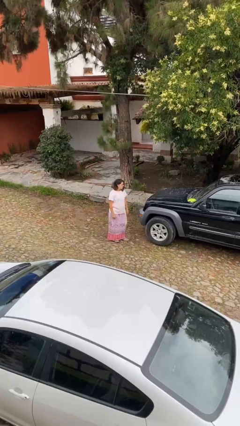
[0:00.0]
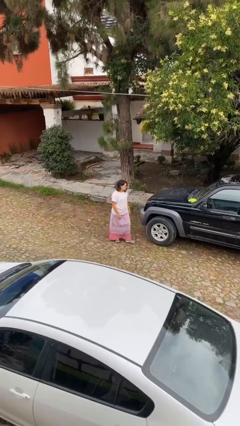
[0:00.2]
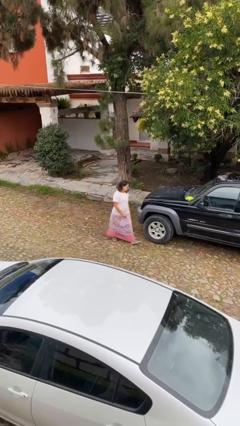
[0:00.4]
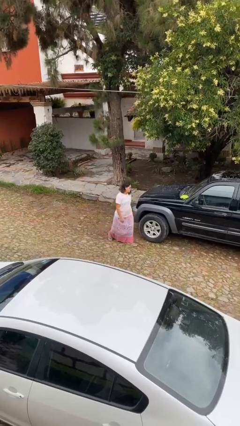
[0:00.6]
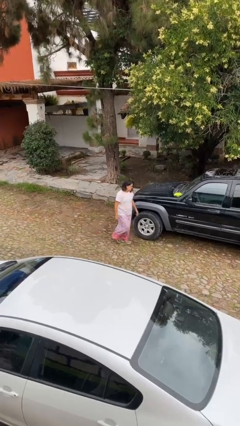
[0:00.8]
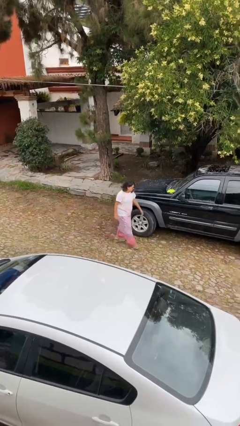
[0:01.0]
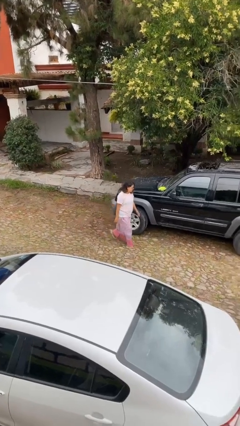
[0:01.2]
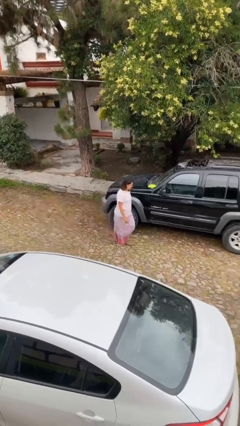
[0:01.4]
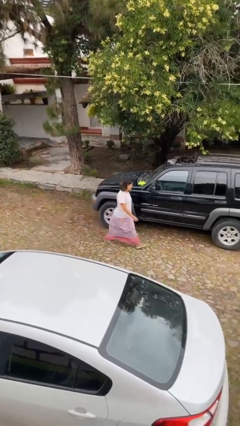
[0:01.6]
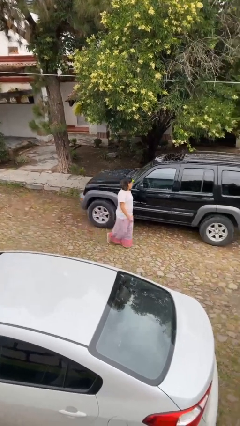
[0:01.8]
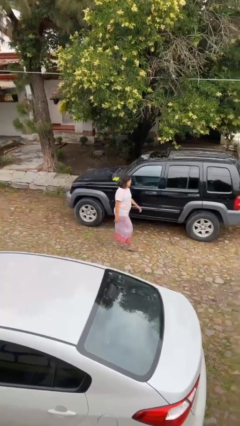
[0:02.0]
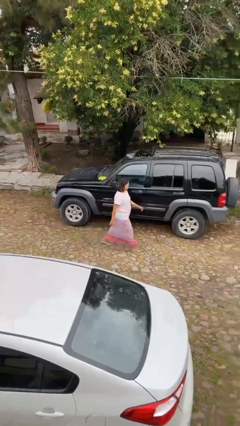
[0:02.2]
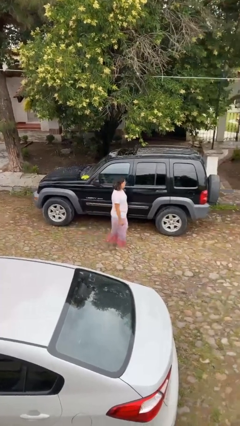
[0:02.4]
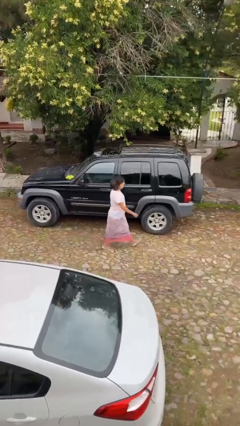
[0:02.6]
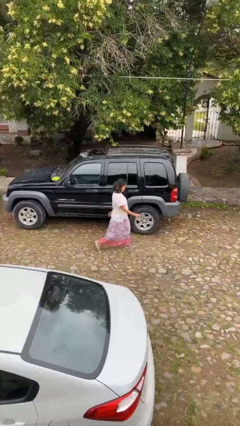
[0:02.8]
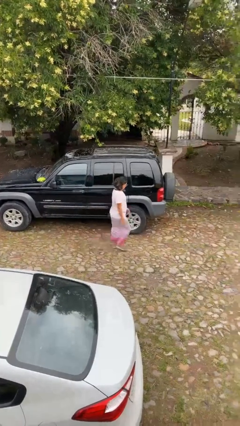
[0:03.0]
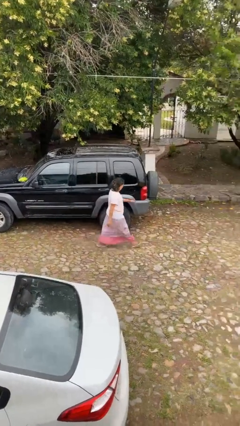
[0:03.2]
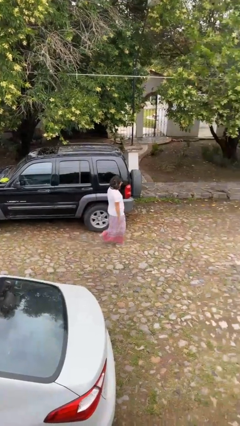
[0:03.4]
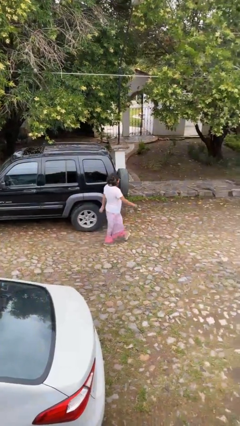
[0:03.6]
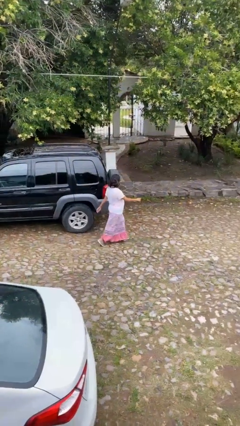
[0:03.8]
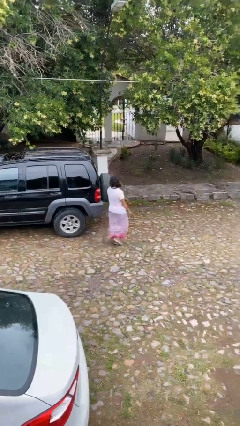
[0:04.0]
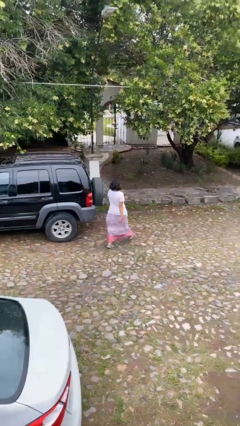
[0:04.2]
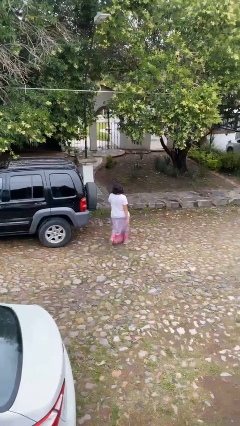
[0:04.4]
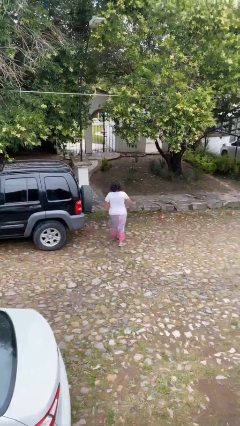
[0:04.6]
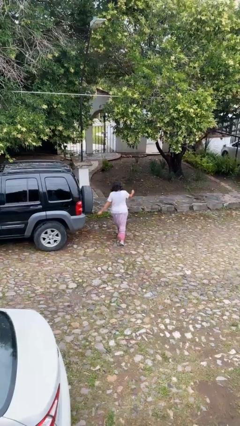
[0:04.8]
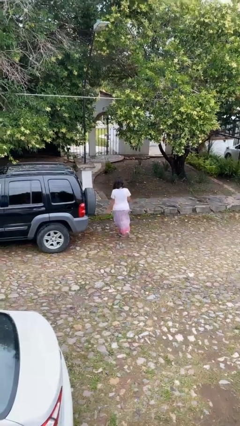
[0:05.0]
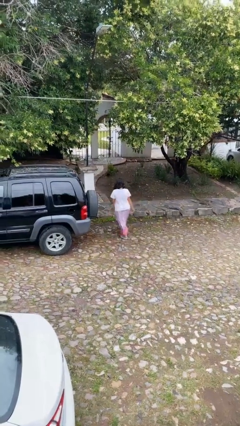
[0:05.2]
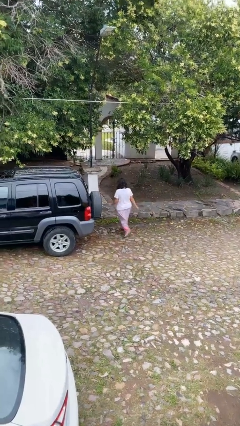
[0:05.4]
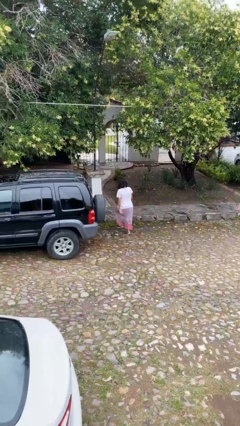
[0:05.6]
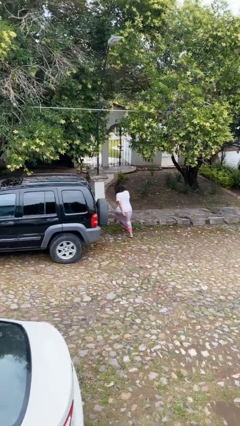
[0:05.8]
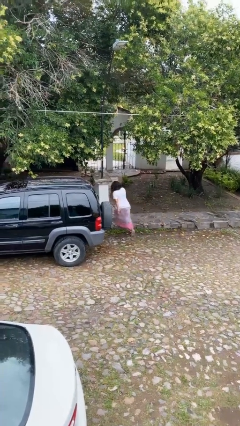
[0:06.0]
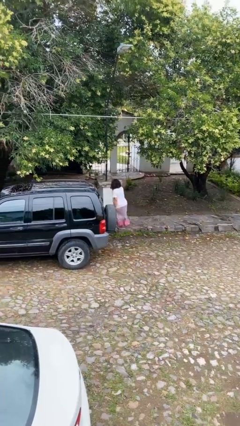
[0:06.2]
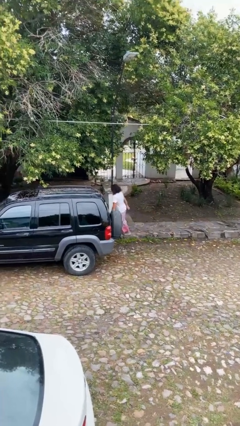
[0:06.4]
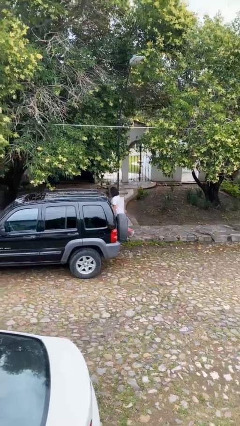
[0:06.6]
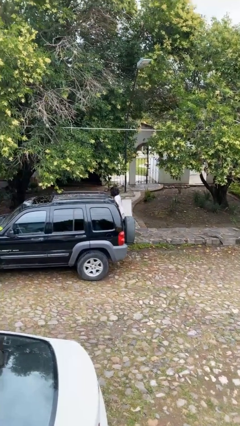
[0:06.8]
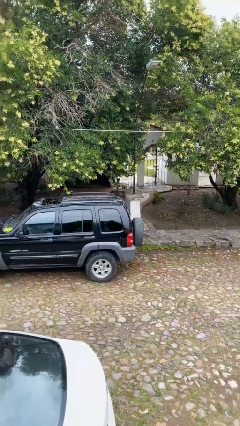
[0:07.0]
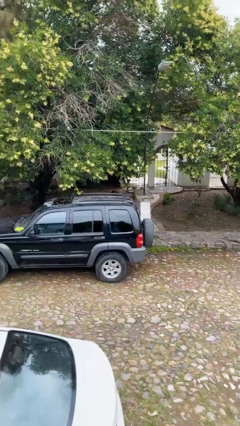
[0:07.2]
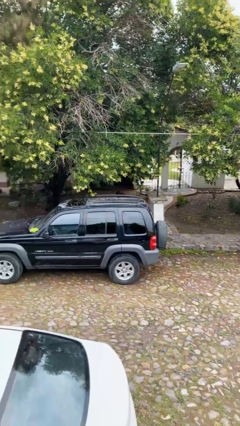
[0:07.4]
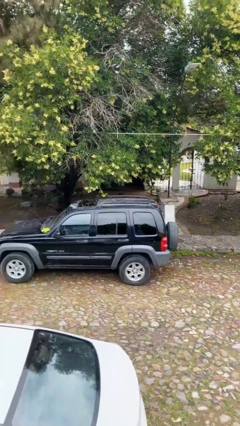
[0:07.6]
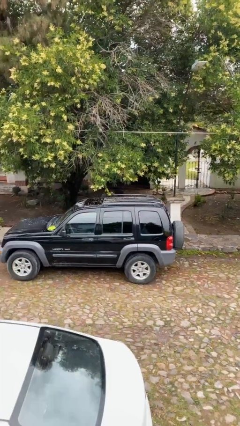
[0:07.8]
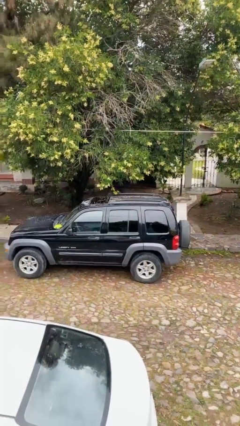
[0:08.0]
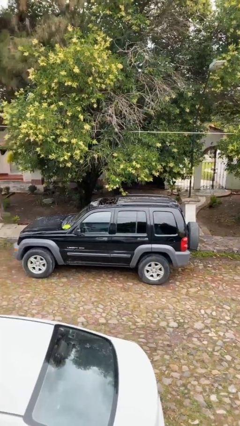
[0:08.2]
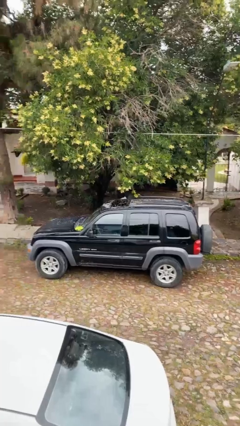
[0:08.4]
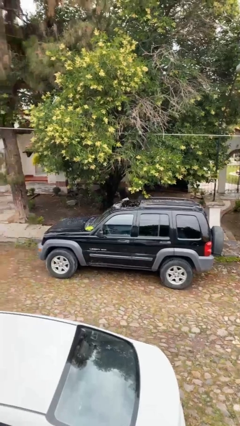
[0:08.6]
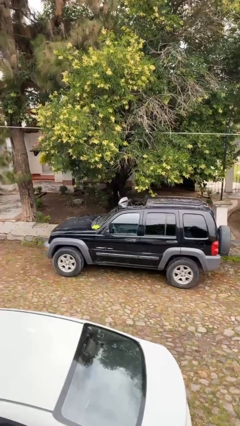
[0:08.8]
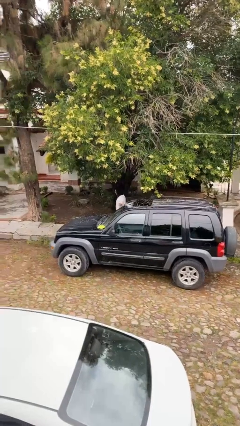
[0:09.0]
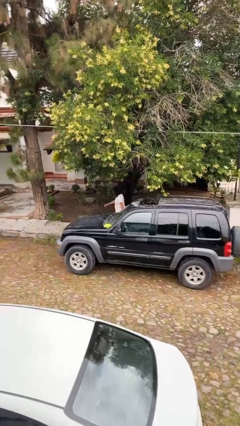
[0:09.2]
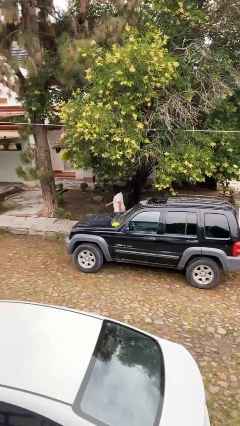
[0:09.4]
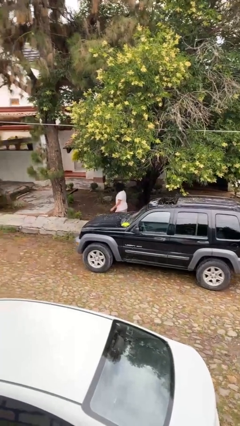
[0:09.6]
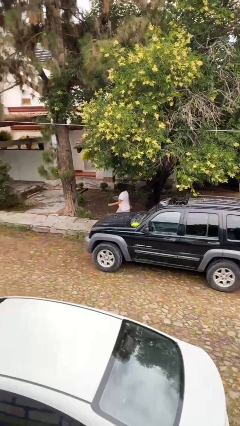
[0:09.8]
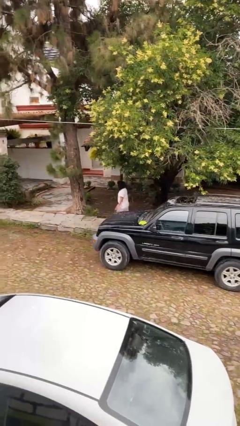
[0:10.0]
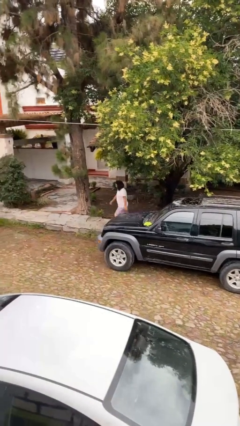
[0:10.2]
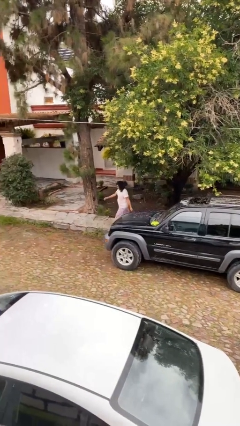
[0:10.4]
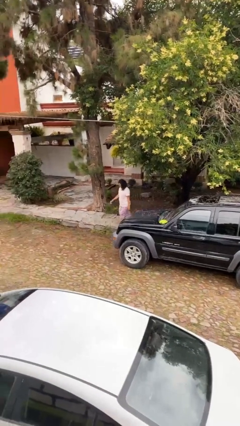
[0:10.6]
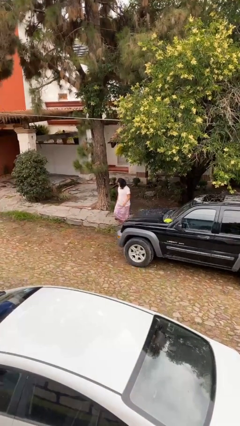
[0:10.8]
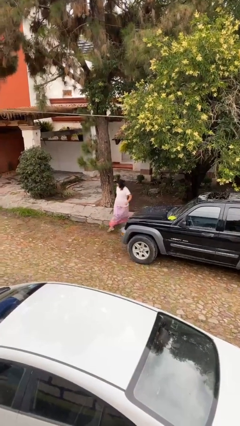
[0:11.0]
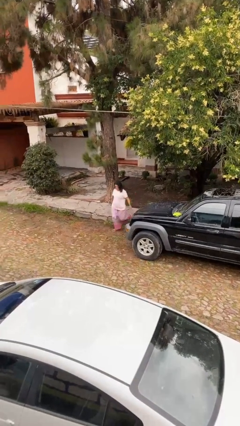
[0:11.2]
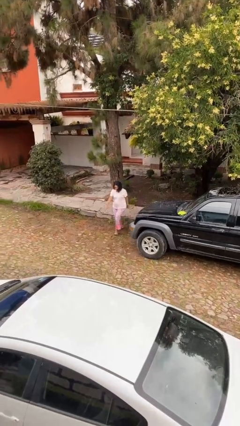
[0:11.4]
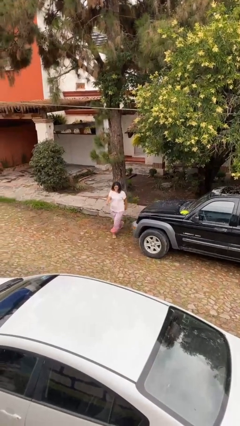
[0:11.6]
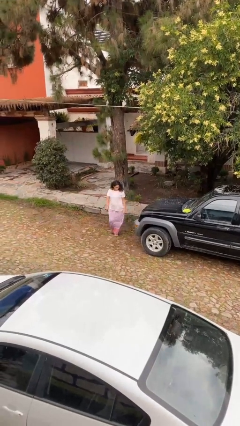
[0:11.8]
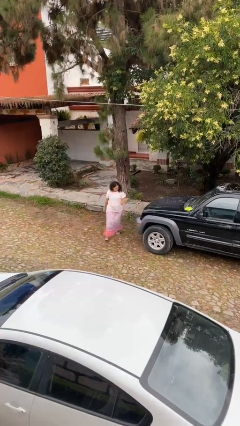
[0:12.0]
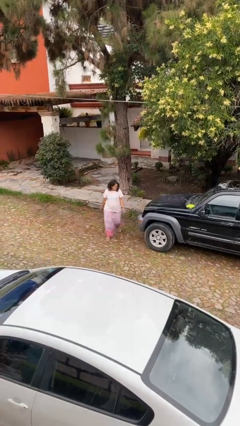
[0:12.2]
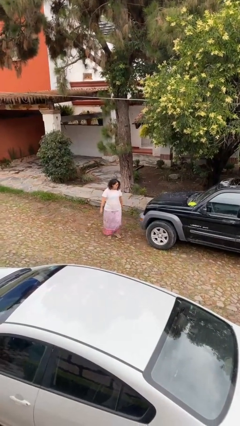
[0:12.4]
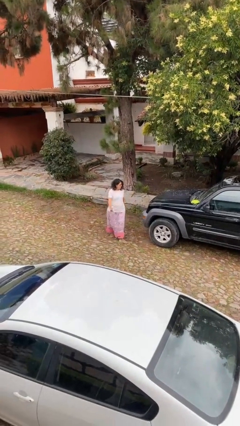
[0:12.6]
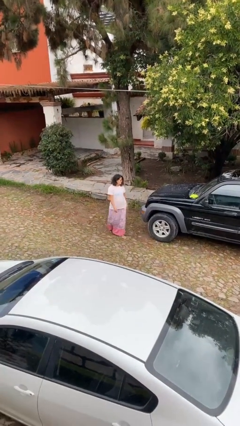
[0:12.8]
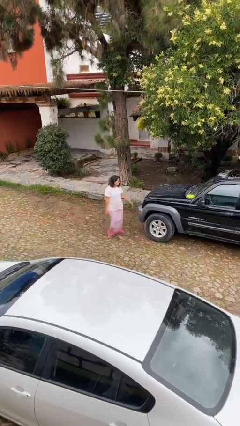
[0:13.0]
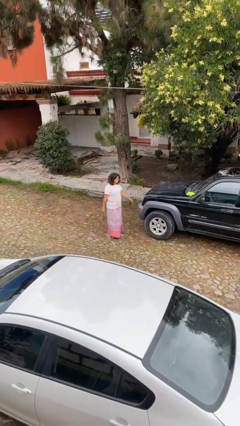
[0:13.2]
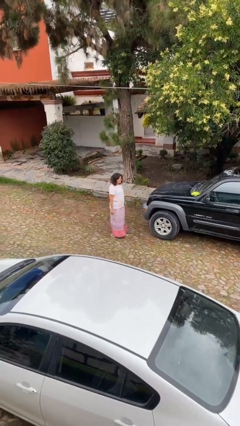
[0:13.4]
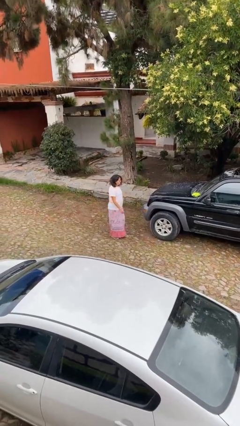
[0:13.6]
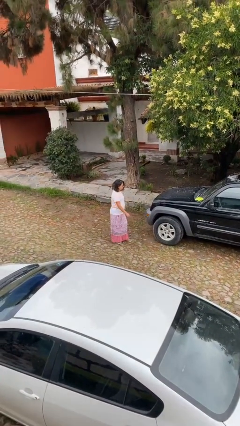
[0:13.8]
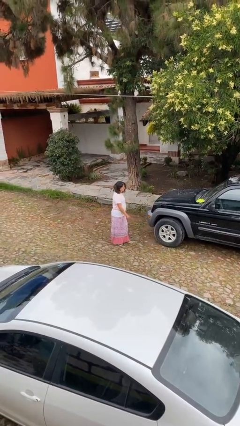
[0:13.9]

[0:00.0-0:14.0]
person walks around car

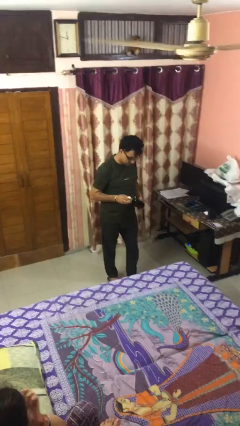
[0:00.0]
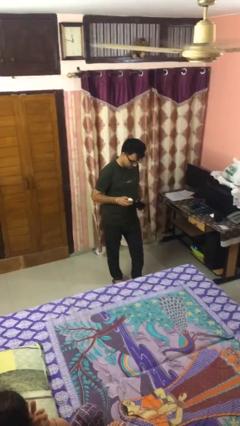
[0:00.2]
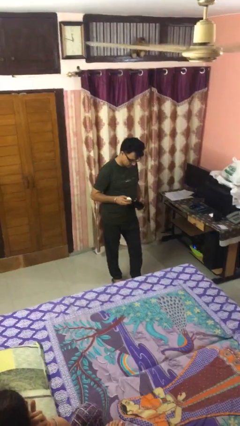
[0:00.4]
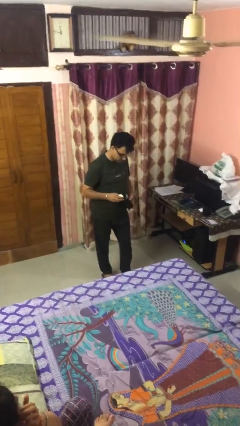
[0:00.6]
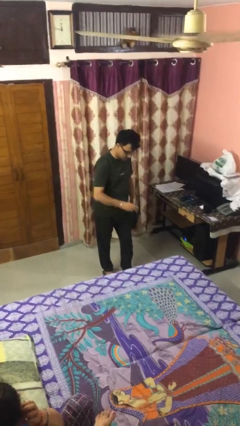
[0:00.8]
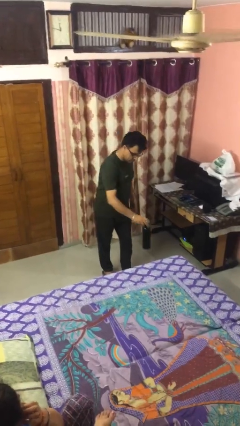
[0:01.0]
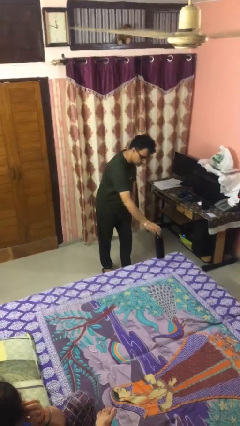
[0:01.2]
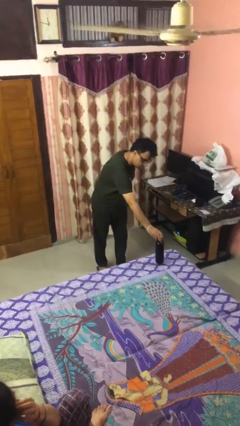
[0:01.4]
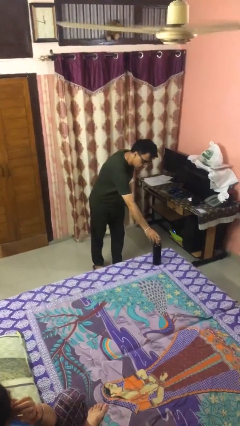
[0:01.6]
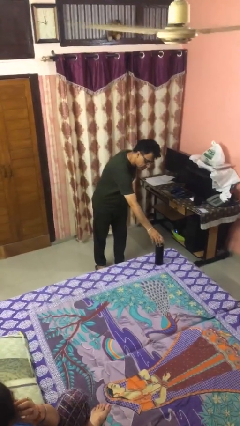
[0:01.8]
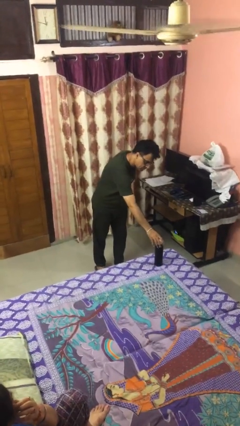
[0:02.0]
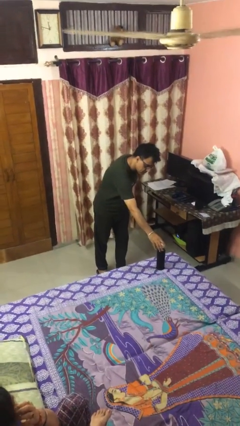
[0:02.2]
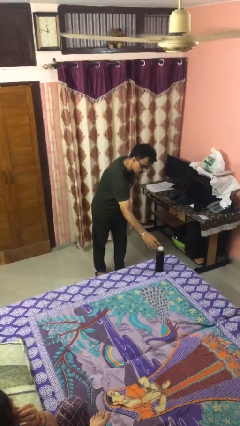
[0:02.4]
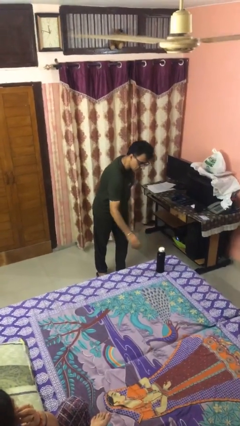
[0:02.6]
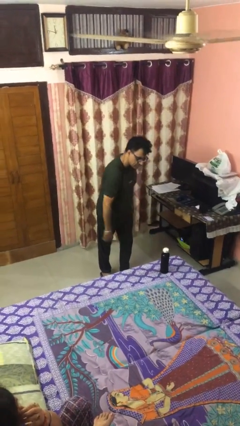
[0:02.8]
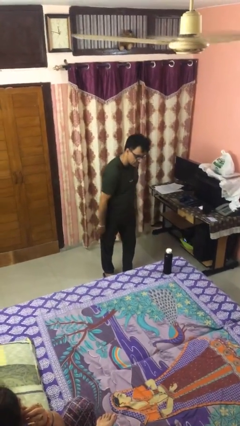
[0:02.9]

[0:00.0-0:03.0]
person puts down object on bed

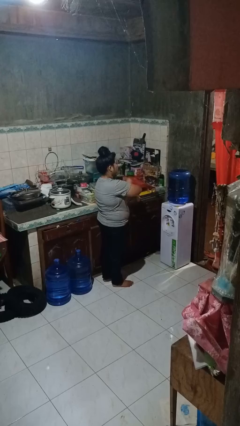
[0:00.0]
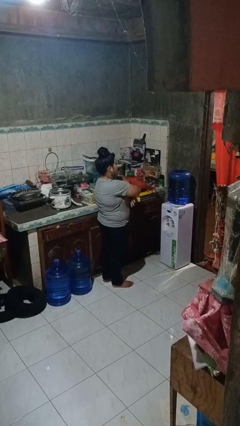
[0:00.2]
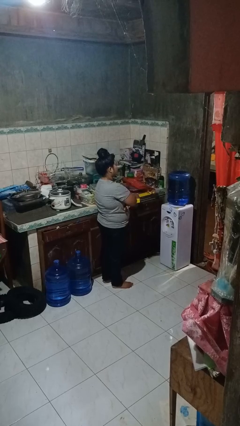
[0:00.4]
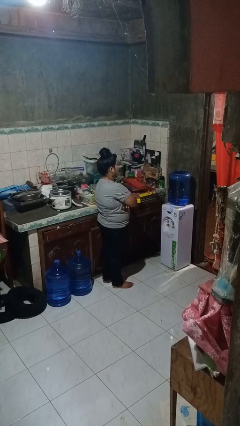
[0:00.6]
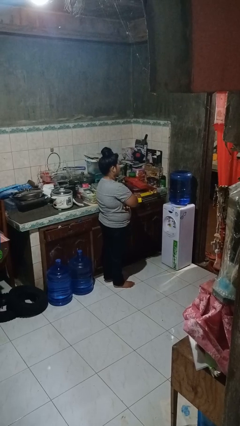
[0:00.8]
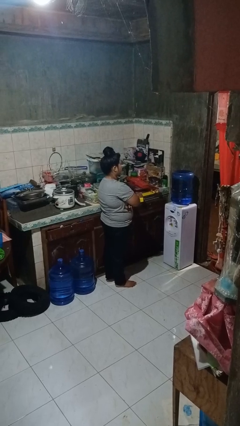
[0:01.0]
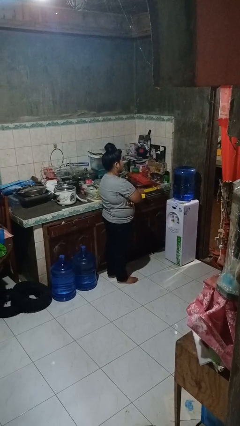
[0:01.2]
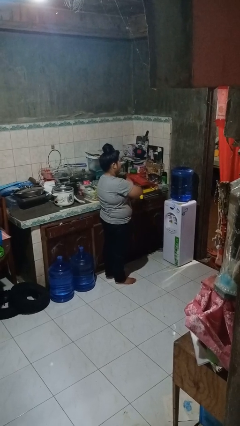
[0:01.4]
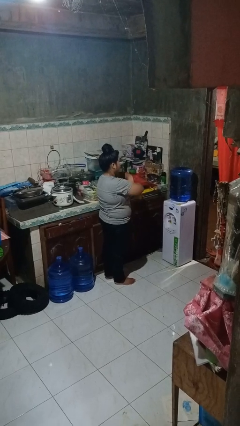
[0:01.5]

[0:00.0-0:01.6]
person crosses arms
